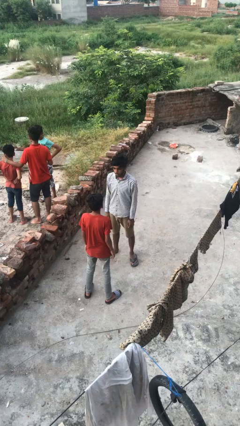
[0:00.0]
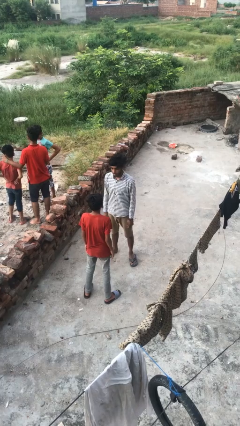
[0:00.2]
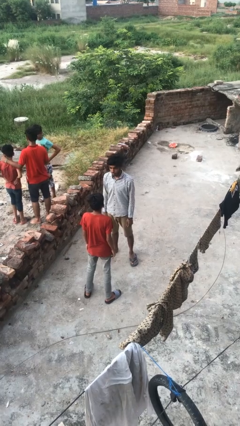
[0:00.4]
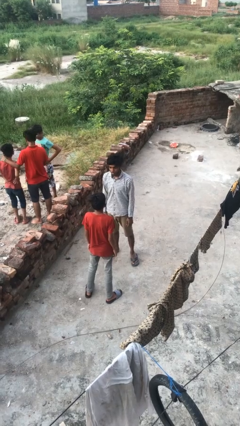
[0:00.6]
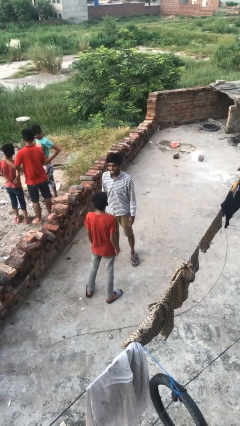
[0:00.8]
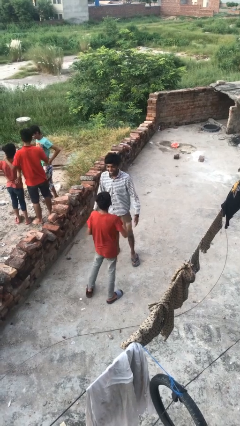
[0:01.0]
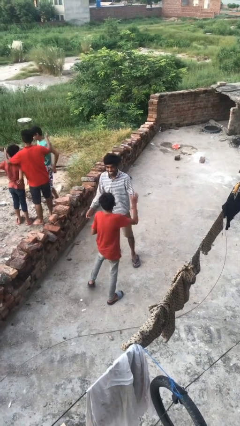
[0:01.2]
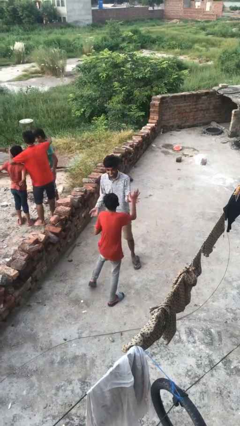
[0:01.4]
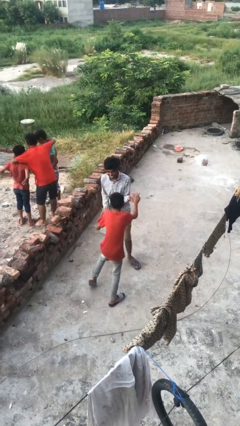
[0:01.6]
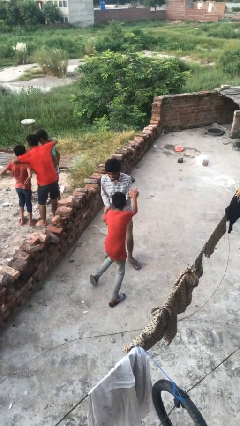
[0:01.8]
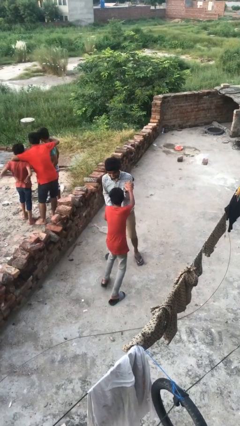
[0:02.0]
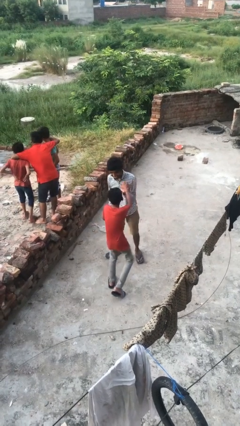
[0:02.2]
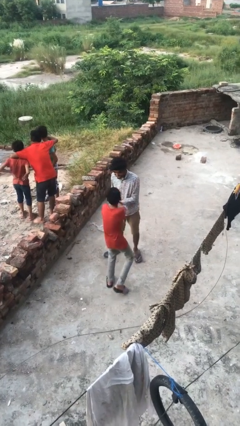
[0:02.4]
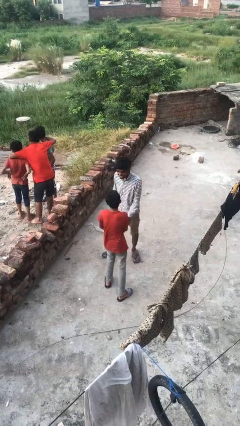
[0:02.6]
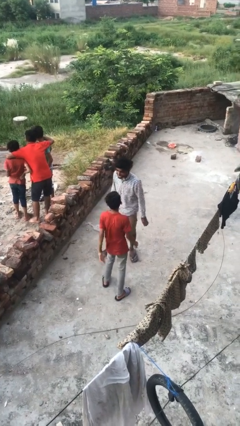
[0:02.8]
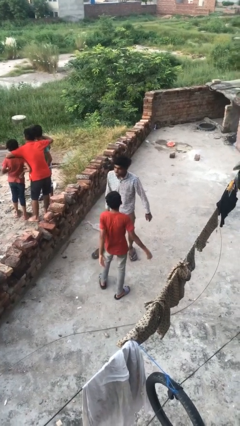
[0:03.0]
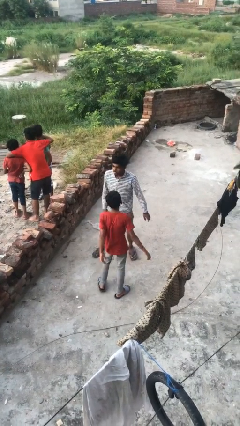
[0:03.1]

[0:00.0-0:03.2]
person laughs with person

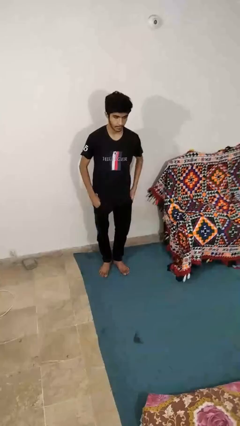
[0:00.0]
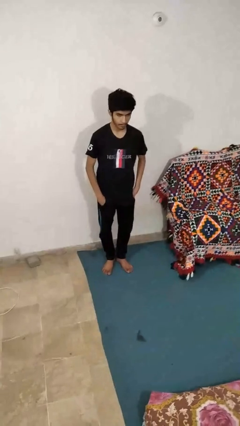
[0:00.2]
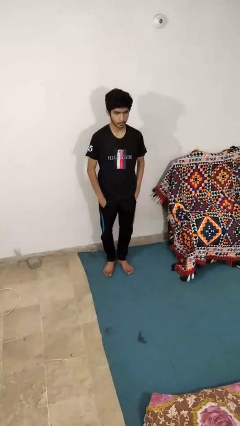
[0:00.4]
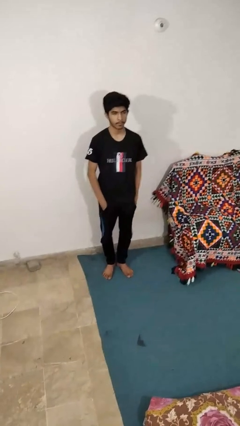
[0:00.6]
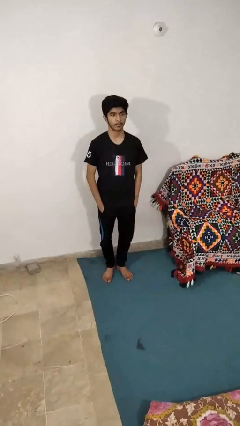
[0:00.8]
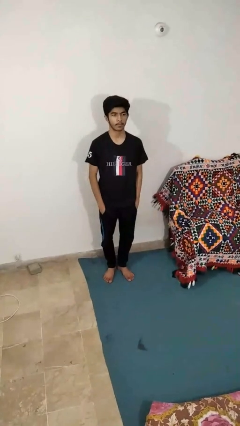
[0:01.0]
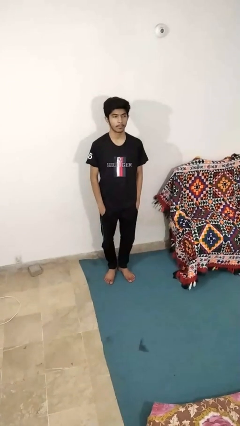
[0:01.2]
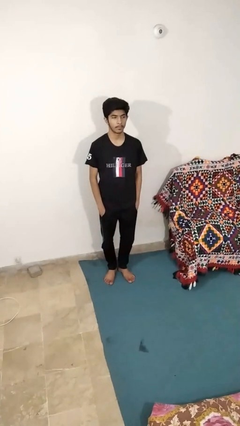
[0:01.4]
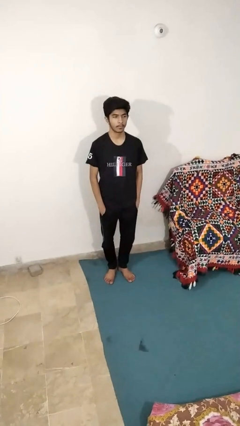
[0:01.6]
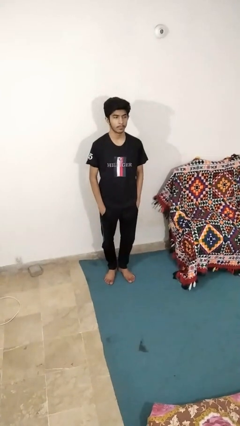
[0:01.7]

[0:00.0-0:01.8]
person puts hands in back pockets

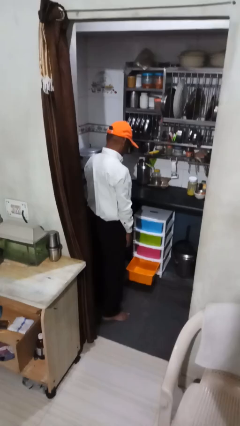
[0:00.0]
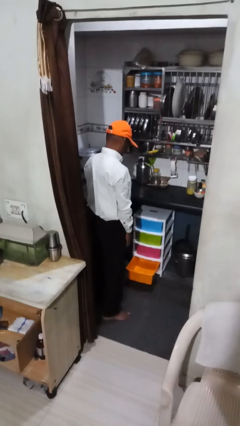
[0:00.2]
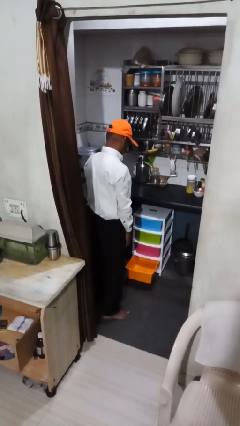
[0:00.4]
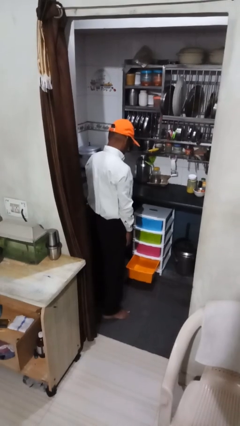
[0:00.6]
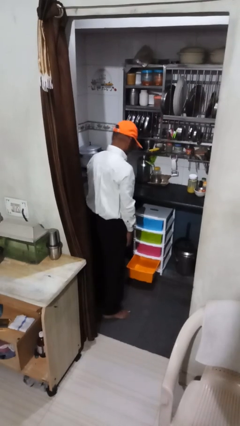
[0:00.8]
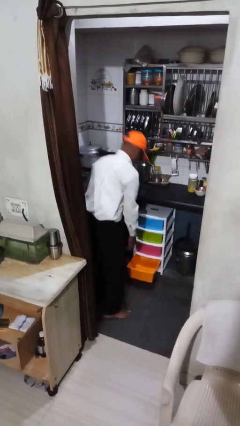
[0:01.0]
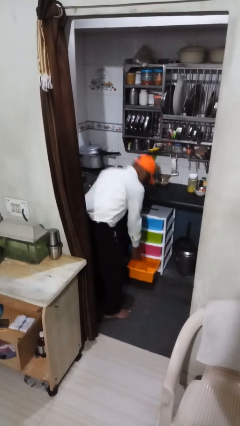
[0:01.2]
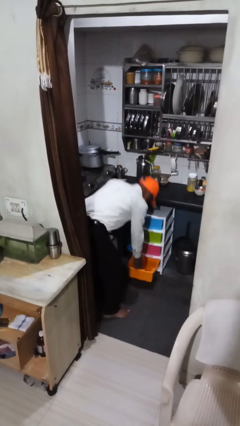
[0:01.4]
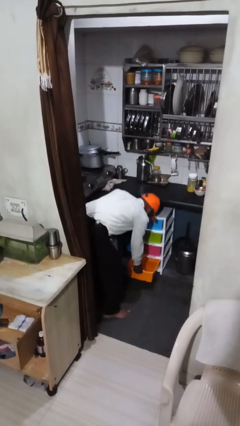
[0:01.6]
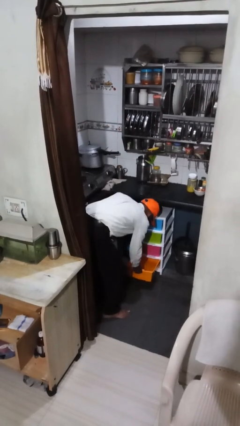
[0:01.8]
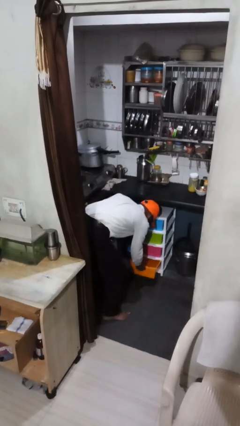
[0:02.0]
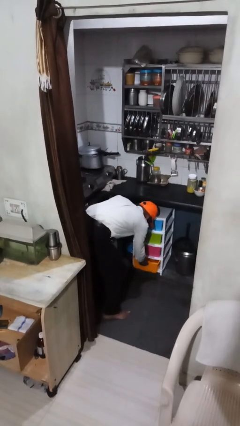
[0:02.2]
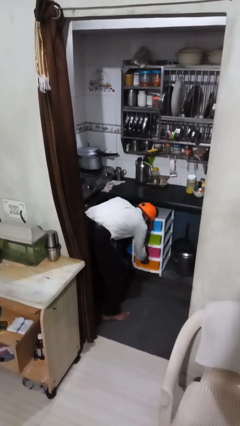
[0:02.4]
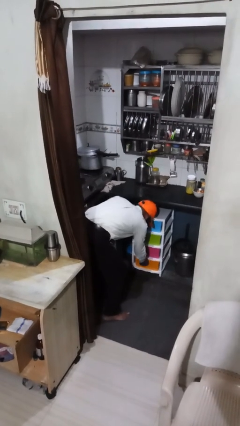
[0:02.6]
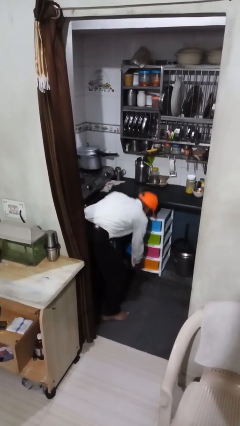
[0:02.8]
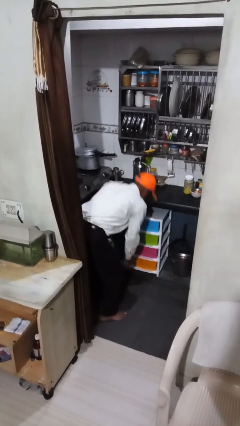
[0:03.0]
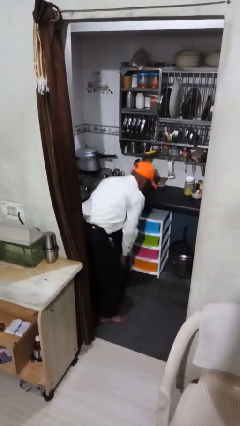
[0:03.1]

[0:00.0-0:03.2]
person closes kitchen drawer

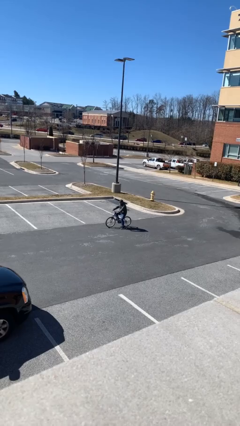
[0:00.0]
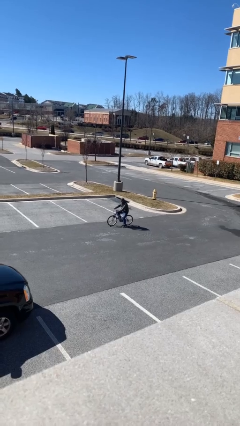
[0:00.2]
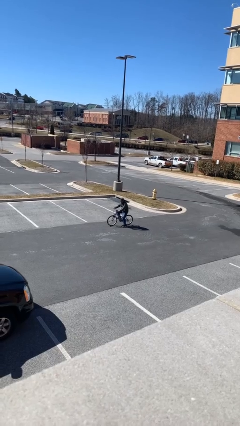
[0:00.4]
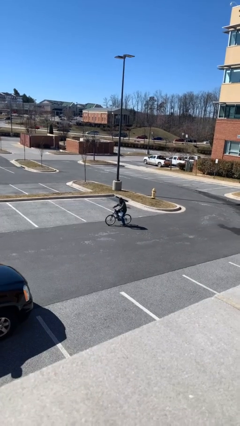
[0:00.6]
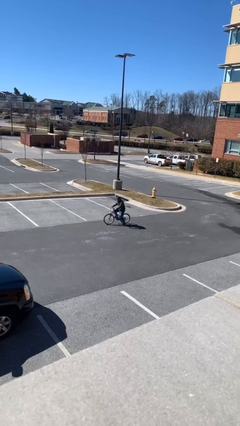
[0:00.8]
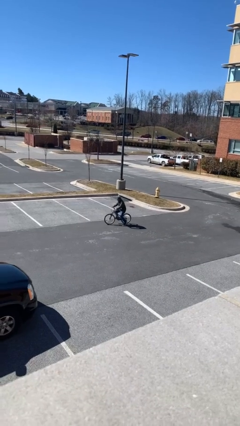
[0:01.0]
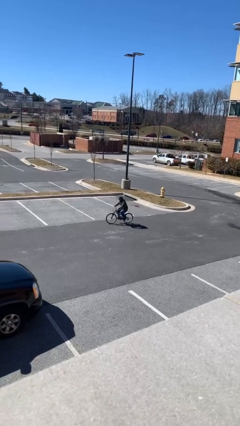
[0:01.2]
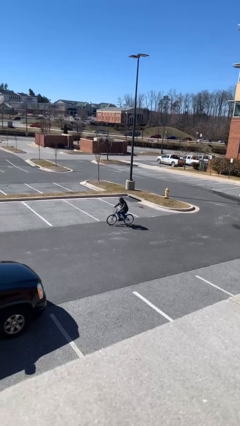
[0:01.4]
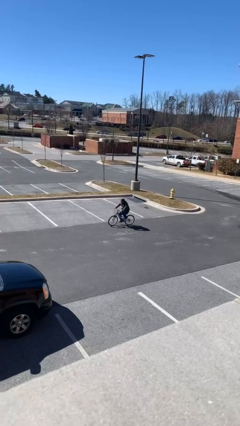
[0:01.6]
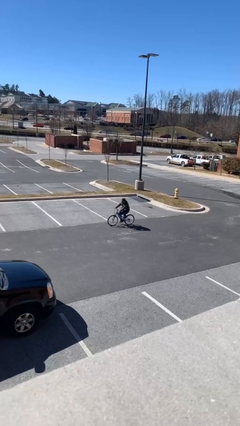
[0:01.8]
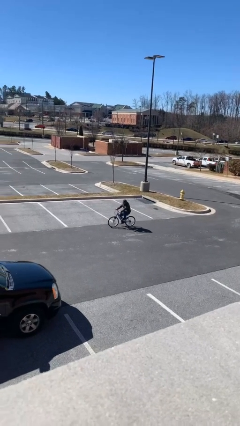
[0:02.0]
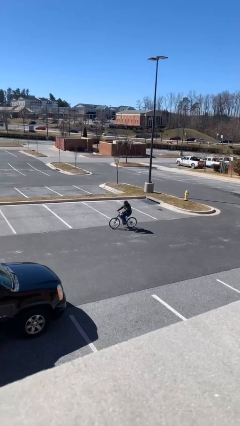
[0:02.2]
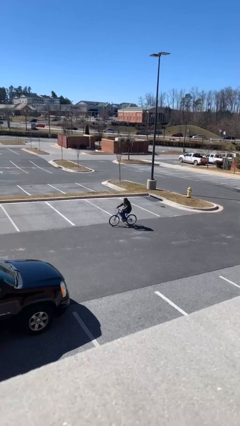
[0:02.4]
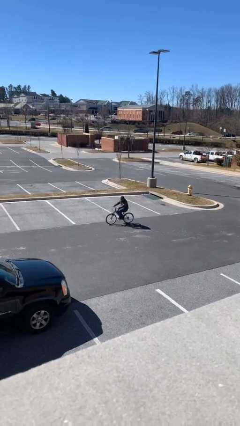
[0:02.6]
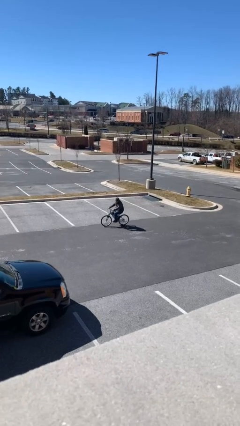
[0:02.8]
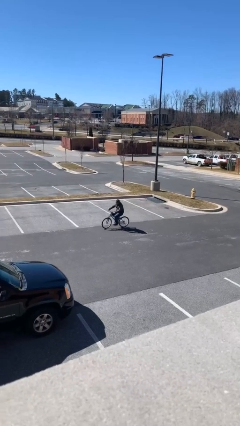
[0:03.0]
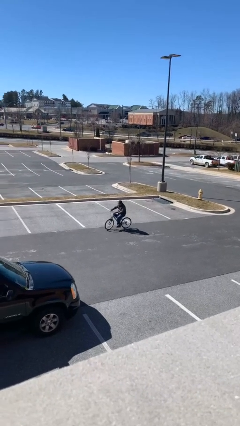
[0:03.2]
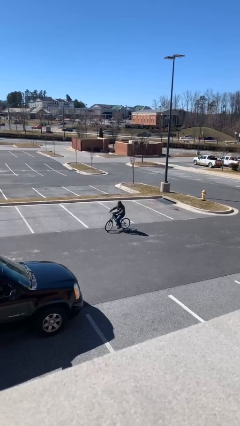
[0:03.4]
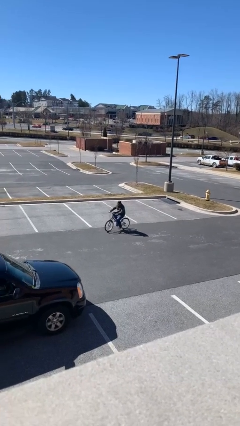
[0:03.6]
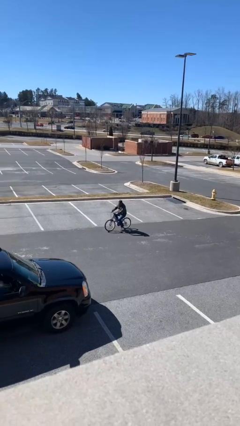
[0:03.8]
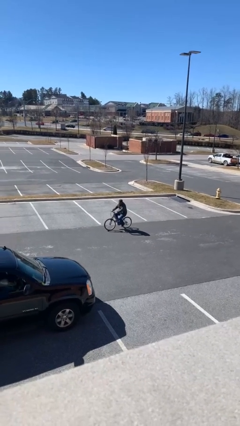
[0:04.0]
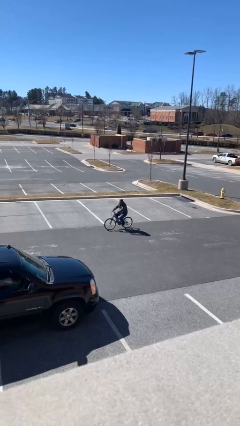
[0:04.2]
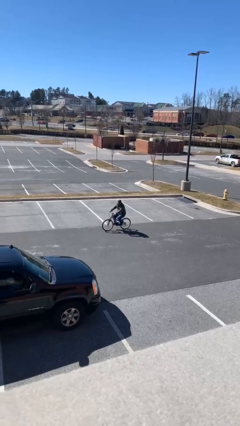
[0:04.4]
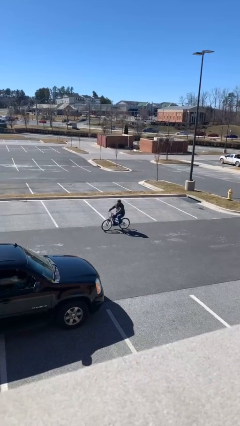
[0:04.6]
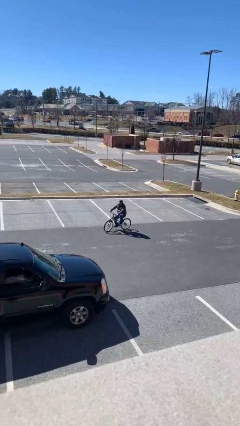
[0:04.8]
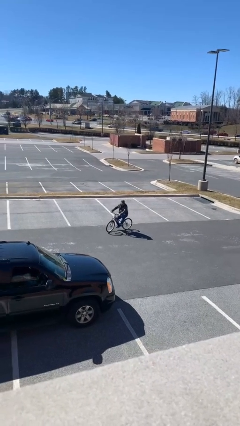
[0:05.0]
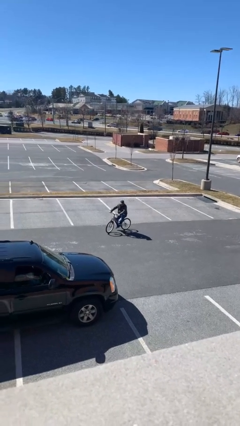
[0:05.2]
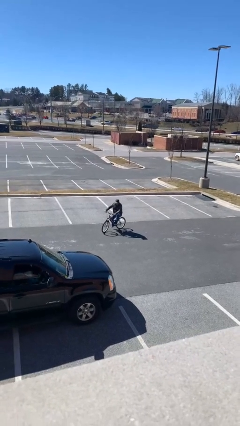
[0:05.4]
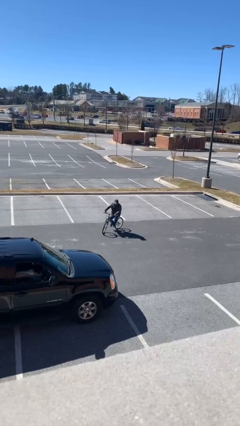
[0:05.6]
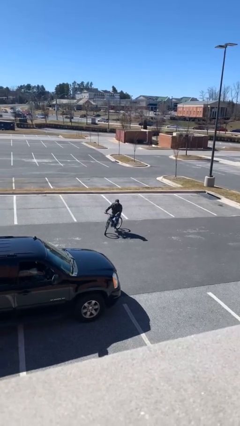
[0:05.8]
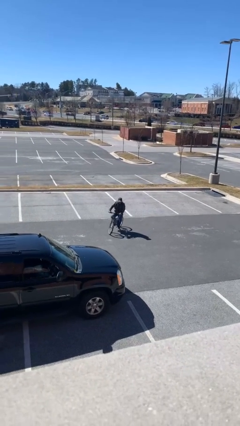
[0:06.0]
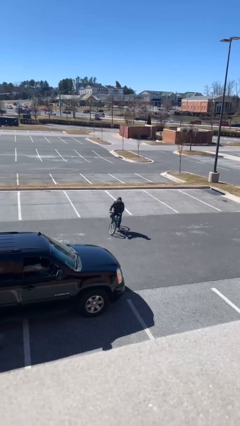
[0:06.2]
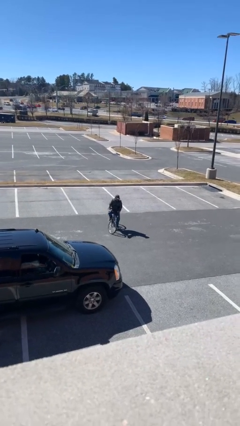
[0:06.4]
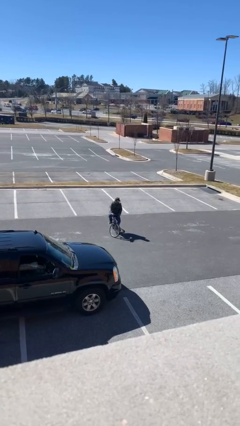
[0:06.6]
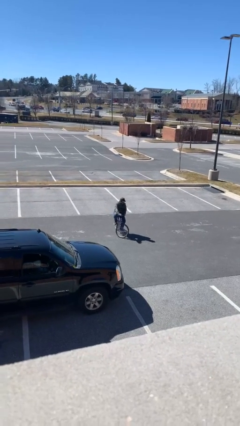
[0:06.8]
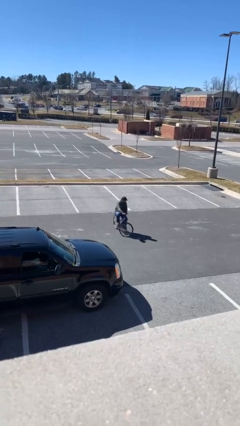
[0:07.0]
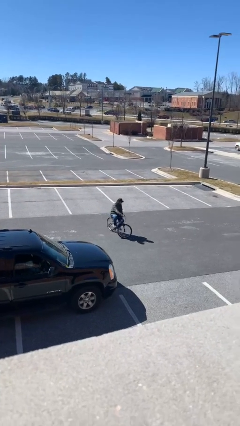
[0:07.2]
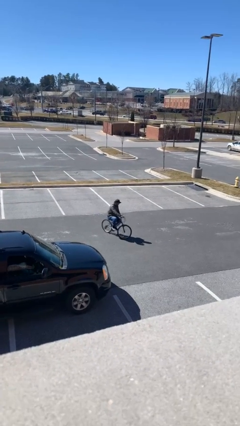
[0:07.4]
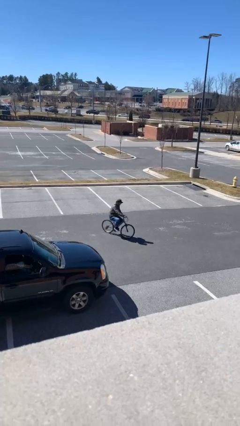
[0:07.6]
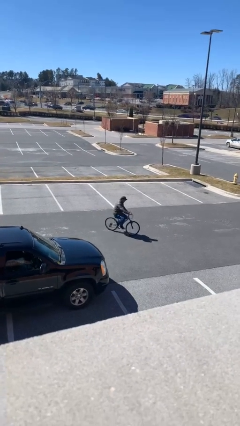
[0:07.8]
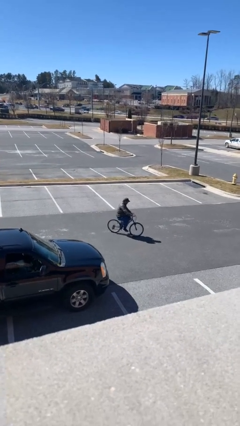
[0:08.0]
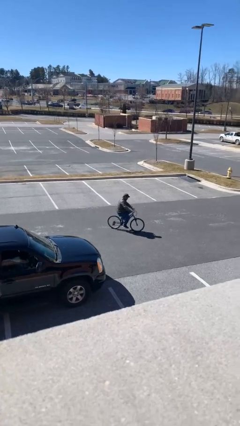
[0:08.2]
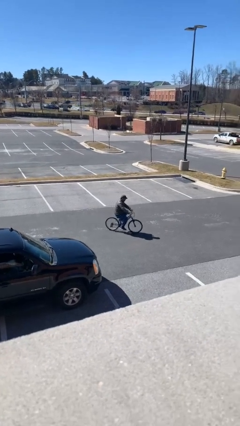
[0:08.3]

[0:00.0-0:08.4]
person rides bicycle

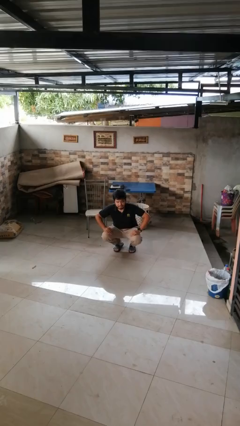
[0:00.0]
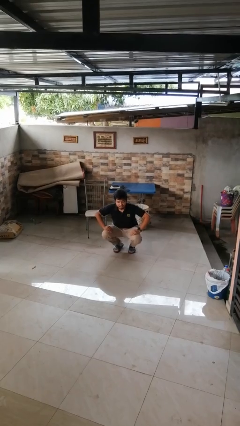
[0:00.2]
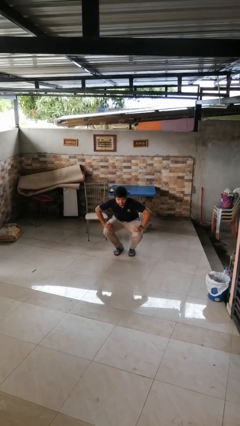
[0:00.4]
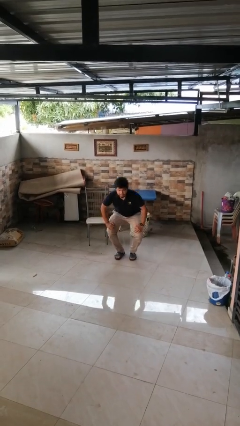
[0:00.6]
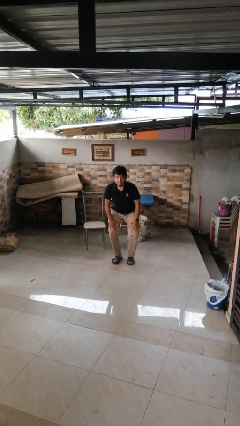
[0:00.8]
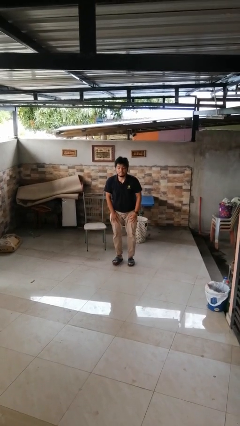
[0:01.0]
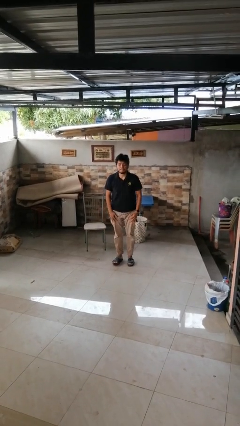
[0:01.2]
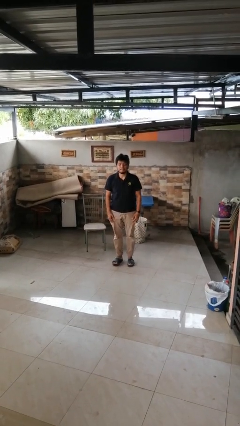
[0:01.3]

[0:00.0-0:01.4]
person stands up
